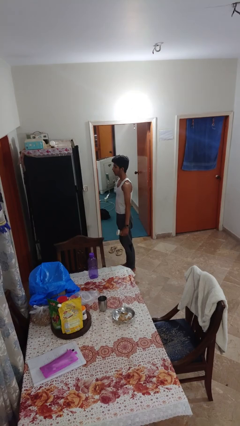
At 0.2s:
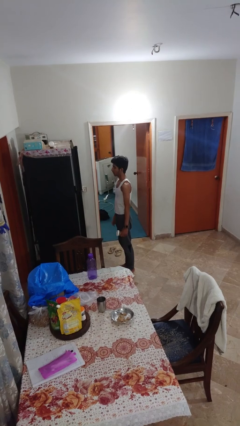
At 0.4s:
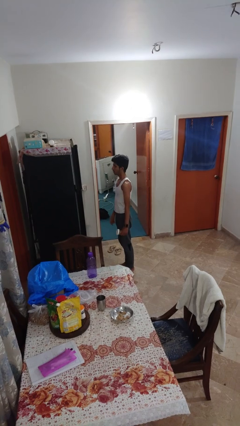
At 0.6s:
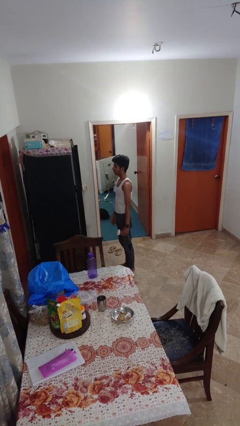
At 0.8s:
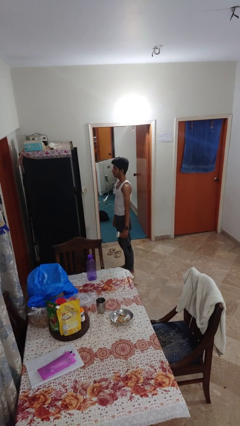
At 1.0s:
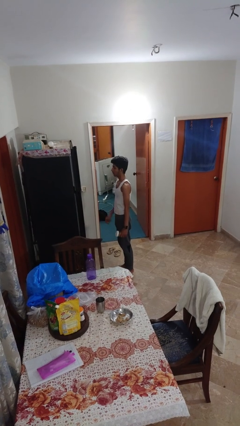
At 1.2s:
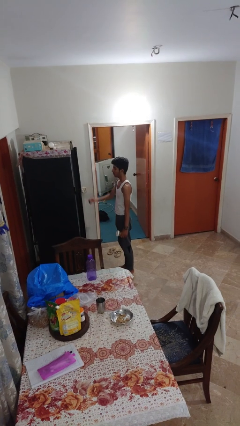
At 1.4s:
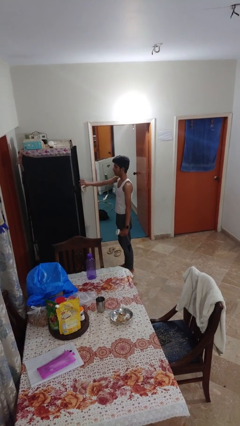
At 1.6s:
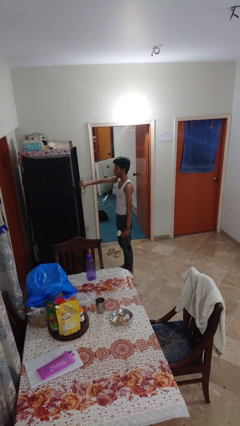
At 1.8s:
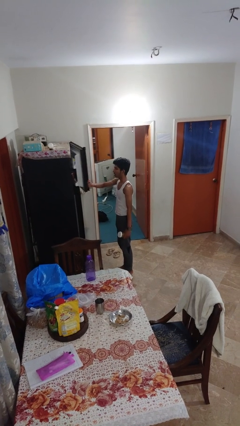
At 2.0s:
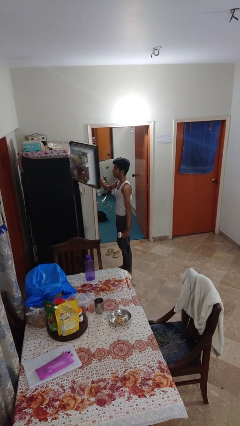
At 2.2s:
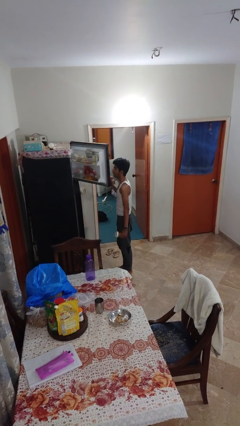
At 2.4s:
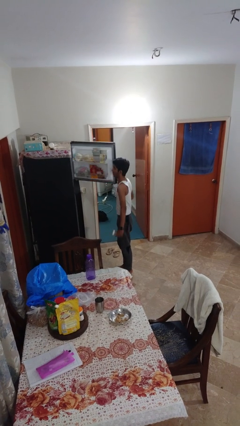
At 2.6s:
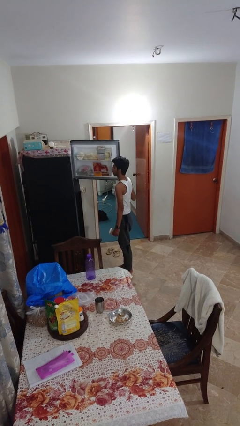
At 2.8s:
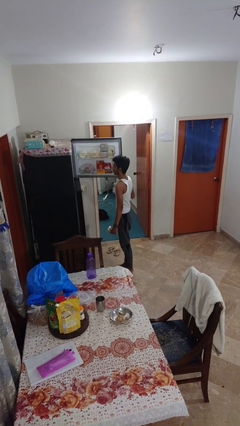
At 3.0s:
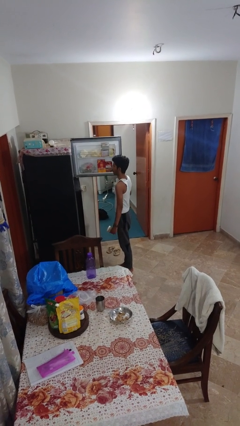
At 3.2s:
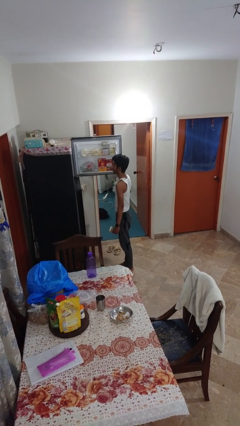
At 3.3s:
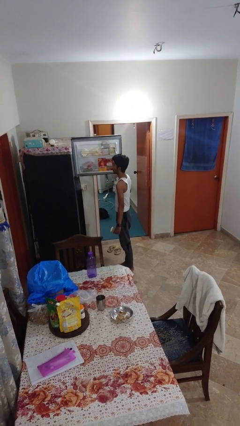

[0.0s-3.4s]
person opens refrigerator

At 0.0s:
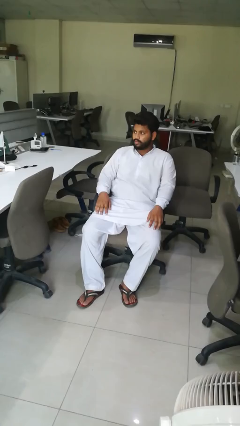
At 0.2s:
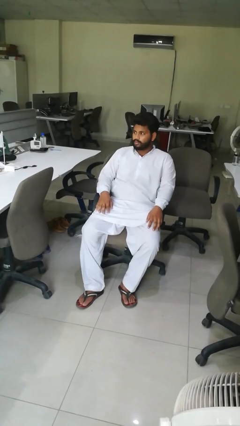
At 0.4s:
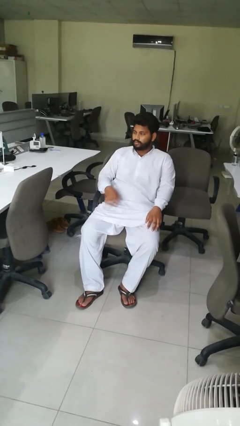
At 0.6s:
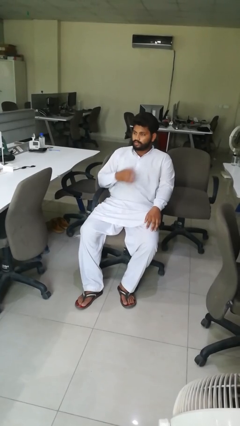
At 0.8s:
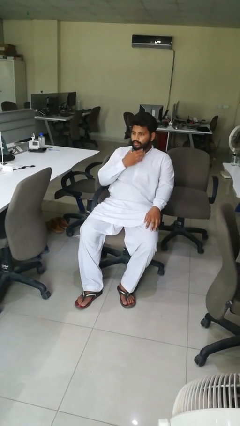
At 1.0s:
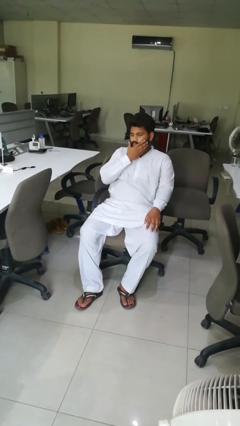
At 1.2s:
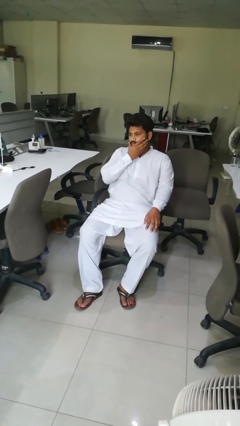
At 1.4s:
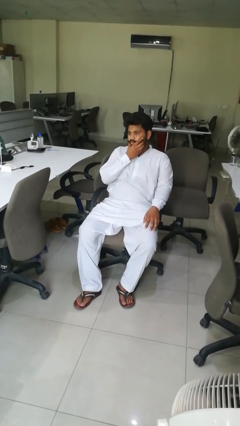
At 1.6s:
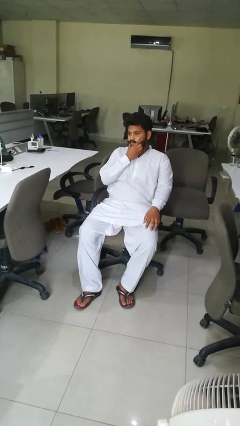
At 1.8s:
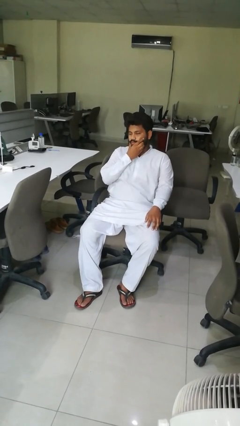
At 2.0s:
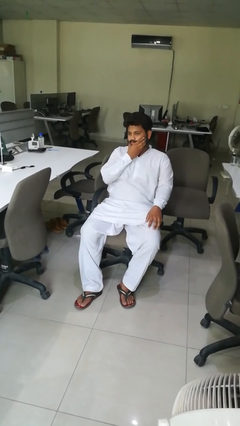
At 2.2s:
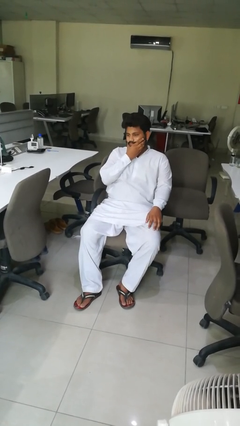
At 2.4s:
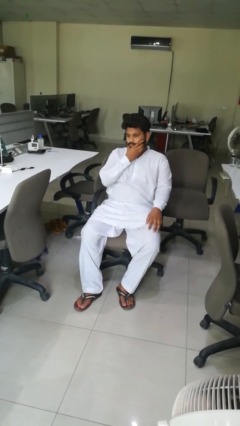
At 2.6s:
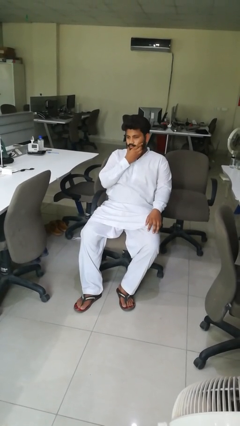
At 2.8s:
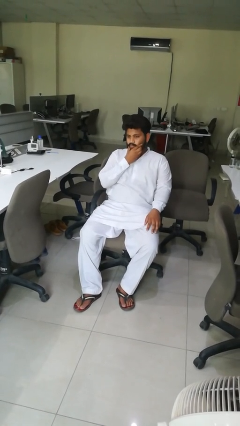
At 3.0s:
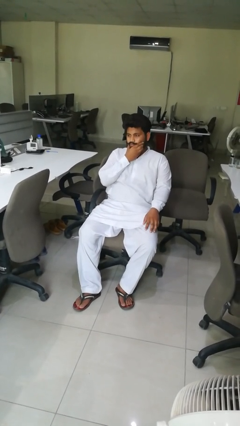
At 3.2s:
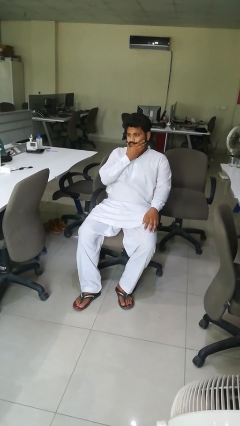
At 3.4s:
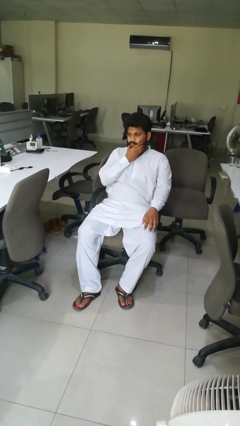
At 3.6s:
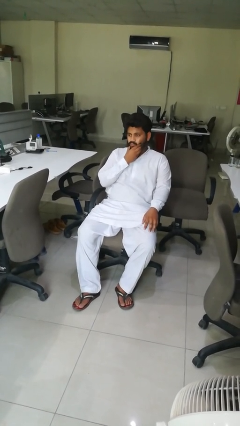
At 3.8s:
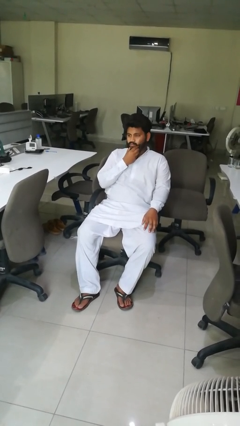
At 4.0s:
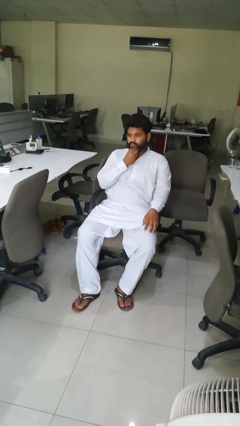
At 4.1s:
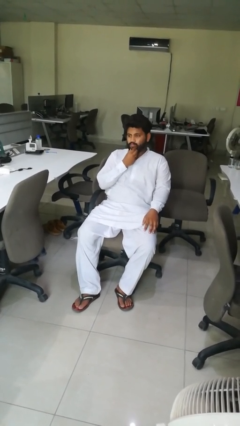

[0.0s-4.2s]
person strokes chin

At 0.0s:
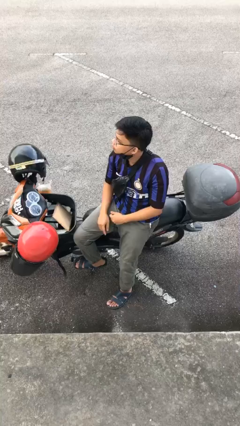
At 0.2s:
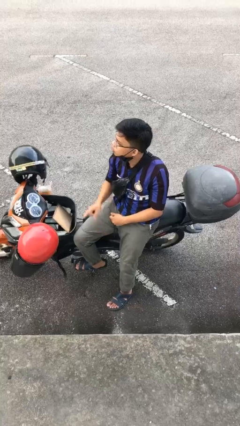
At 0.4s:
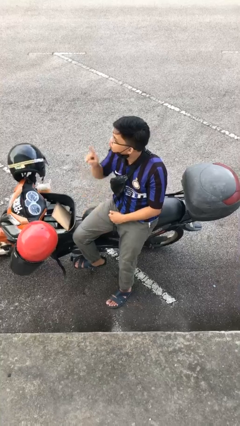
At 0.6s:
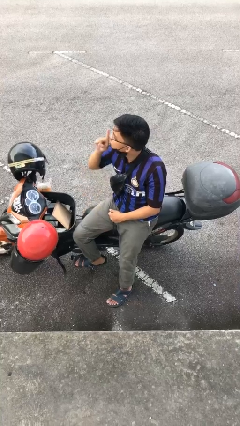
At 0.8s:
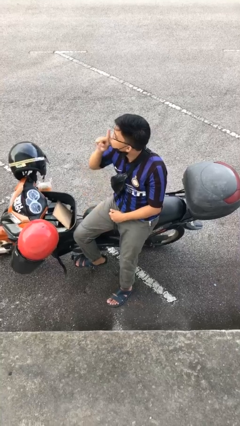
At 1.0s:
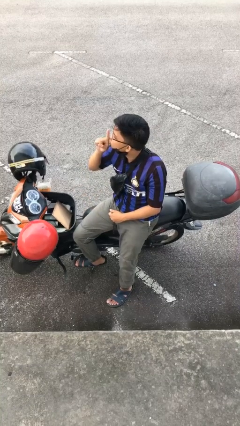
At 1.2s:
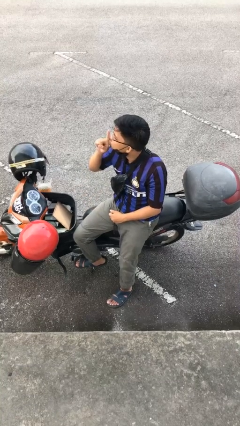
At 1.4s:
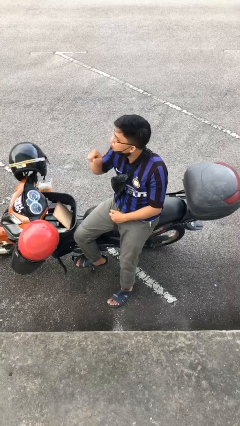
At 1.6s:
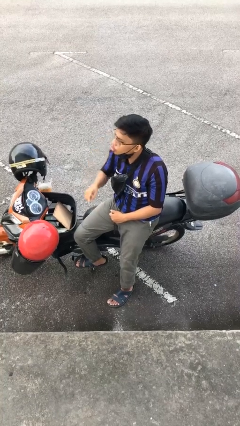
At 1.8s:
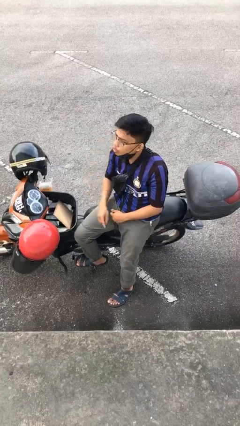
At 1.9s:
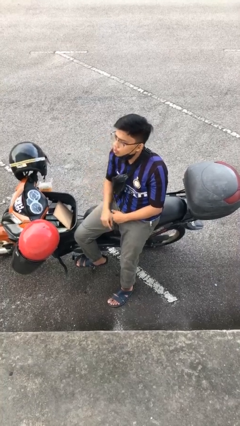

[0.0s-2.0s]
person gestures be quiet

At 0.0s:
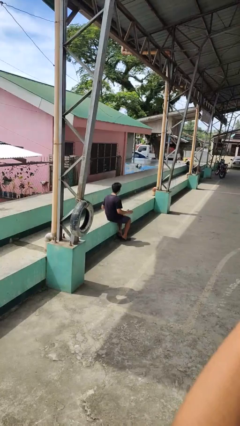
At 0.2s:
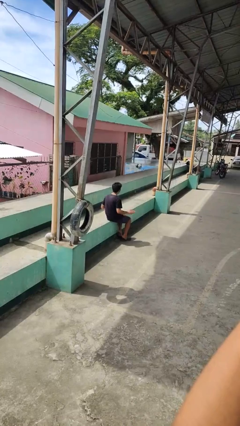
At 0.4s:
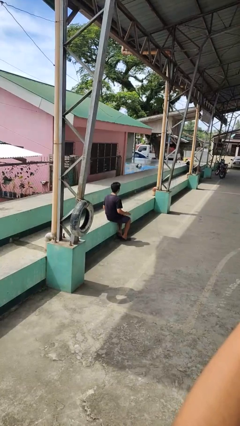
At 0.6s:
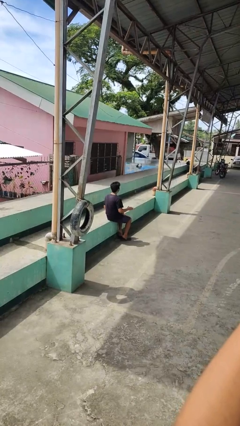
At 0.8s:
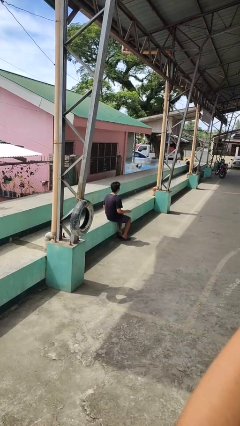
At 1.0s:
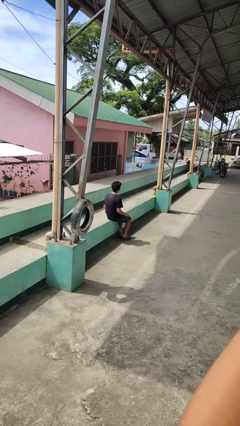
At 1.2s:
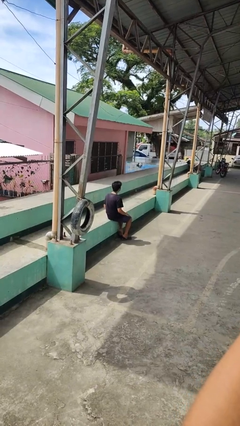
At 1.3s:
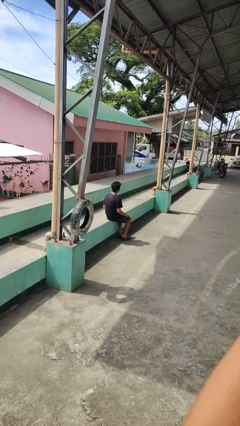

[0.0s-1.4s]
person slaps hands on thighs

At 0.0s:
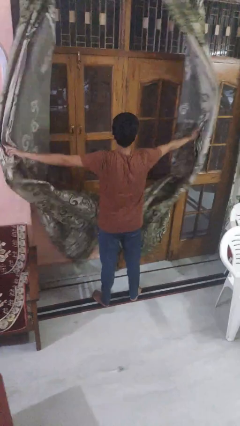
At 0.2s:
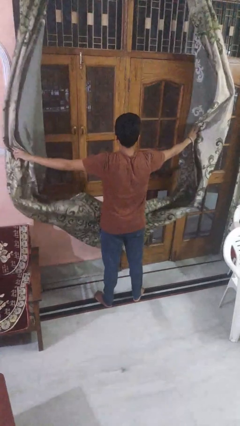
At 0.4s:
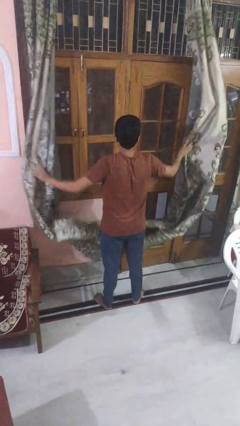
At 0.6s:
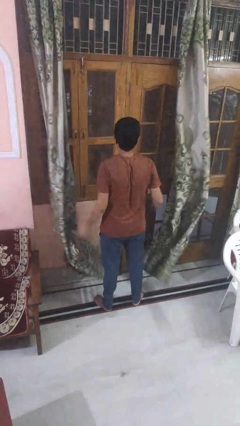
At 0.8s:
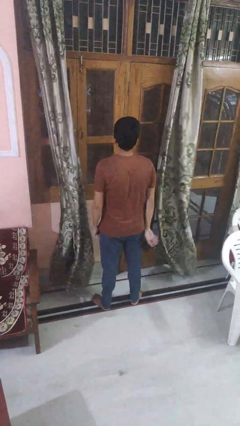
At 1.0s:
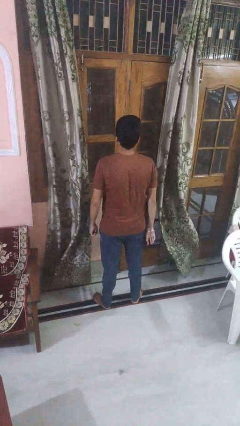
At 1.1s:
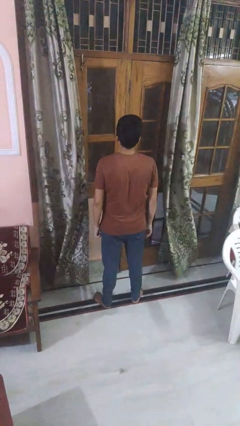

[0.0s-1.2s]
person opens curtains

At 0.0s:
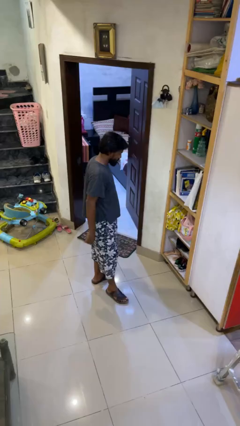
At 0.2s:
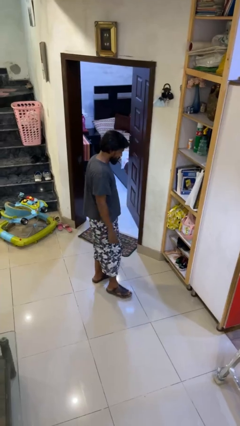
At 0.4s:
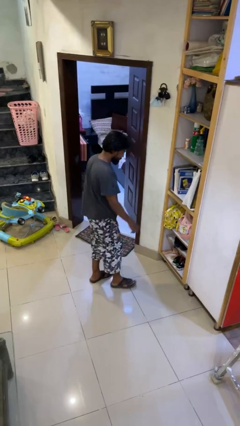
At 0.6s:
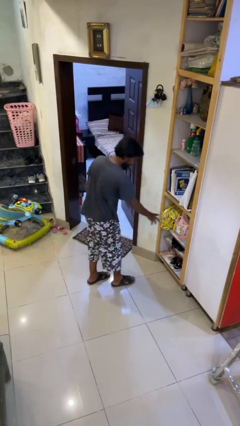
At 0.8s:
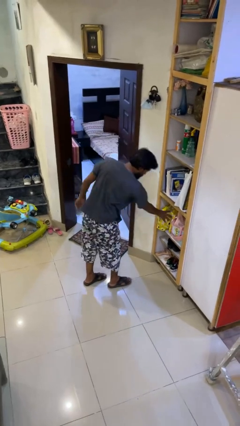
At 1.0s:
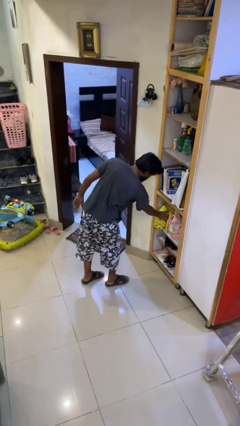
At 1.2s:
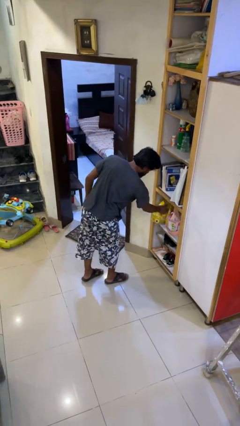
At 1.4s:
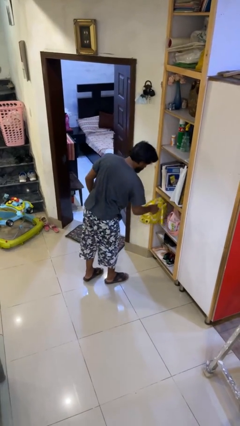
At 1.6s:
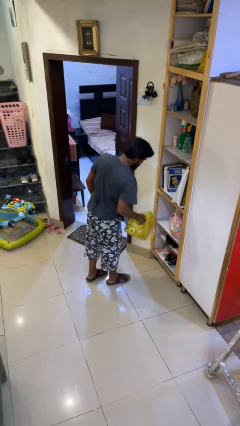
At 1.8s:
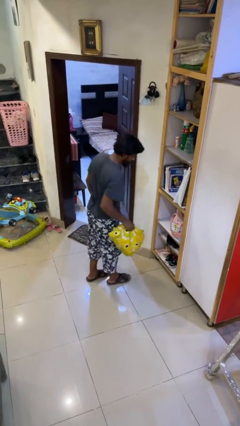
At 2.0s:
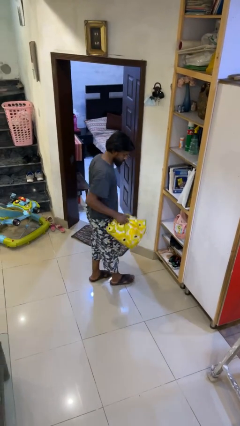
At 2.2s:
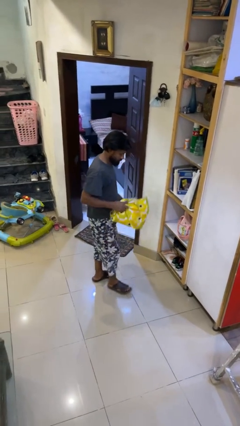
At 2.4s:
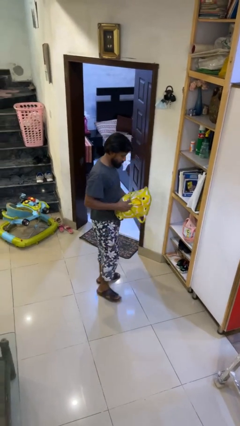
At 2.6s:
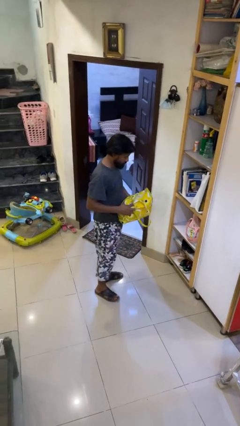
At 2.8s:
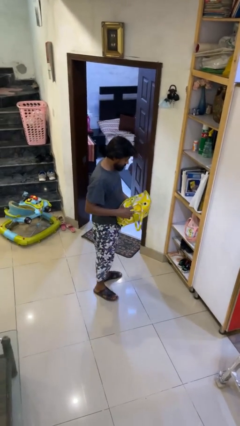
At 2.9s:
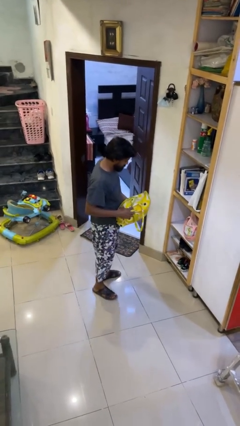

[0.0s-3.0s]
person picks up object from cabinet

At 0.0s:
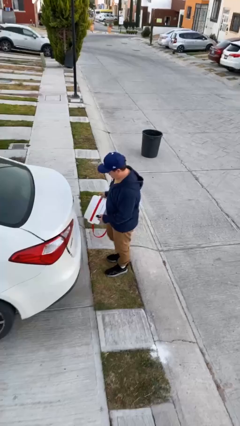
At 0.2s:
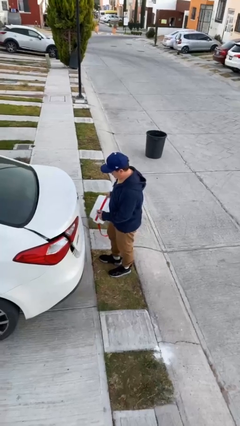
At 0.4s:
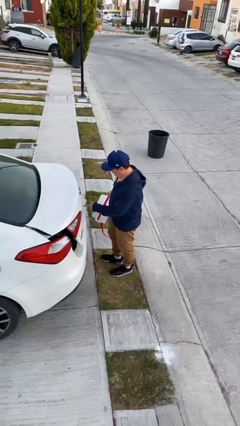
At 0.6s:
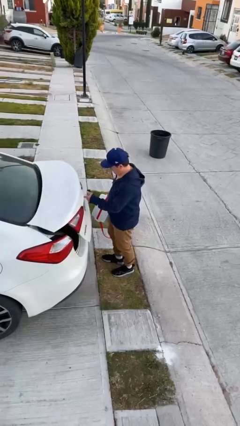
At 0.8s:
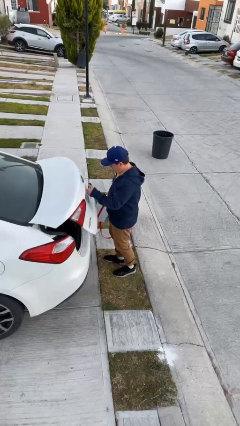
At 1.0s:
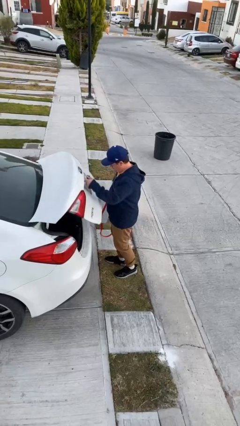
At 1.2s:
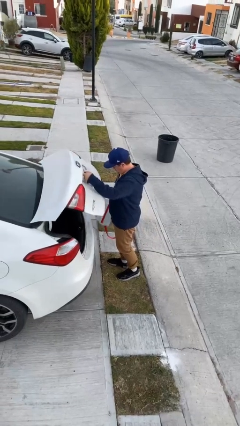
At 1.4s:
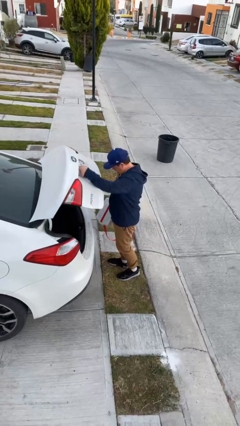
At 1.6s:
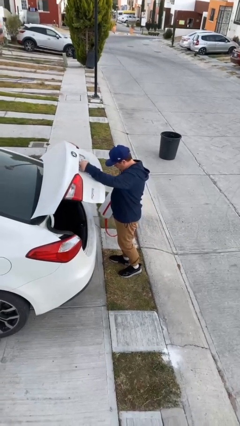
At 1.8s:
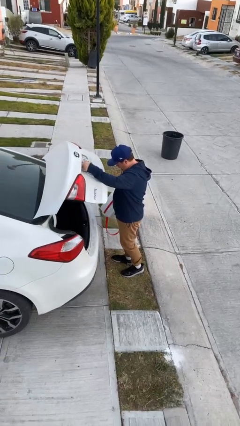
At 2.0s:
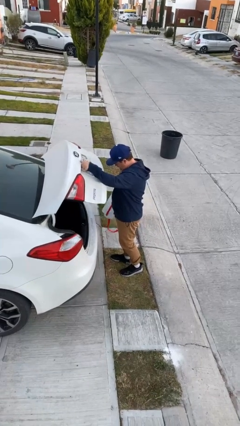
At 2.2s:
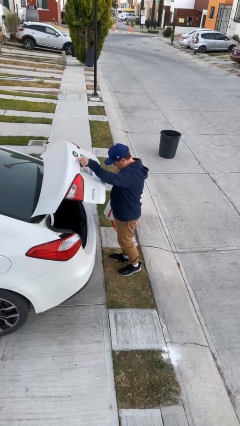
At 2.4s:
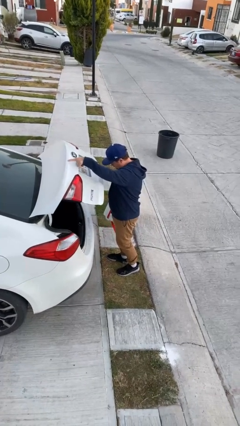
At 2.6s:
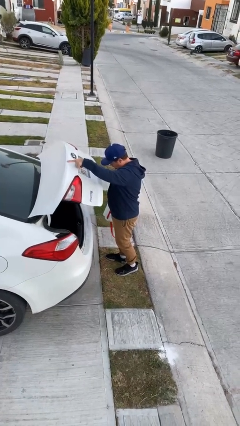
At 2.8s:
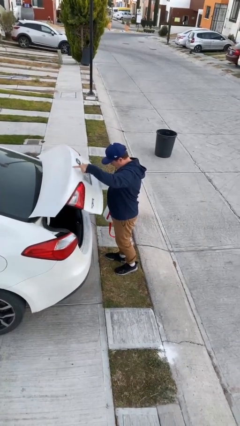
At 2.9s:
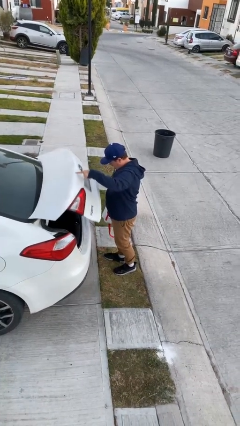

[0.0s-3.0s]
person opens car trunk
